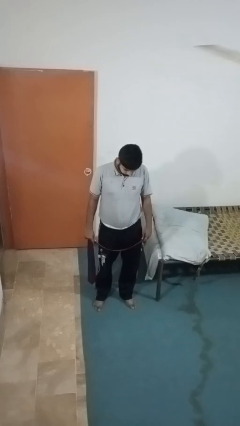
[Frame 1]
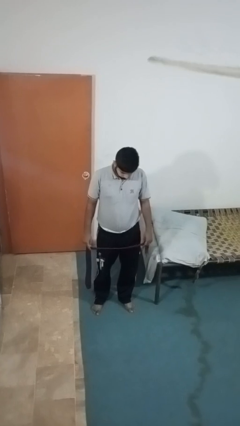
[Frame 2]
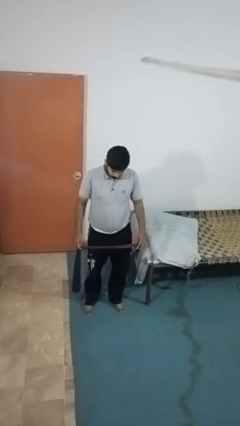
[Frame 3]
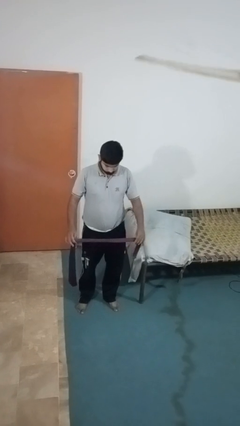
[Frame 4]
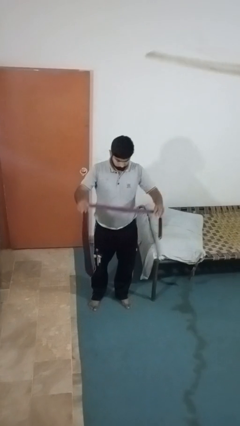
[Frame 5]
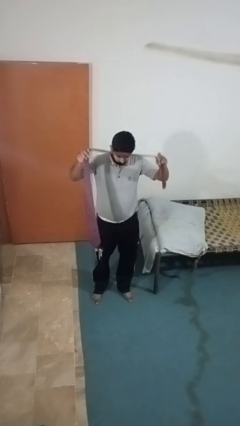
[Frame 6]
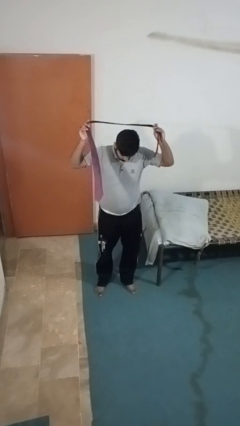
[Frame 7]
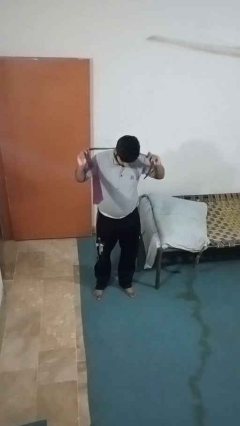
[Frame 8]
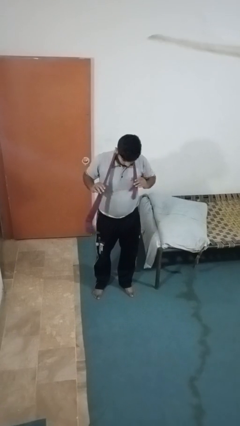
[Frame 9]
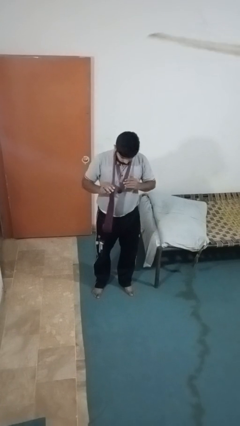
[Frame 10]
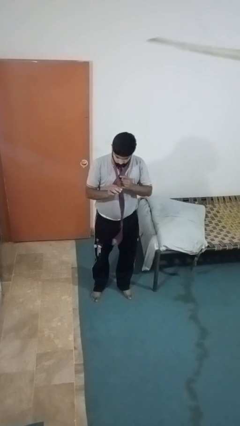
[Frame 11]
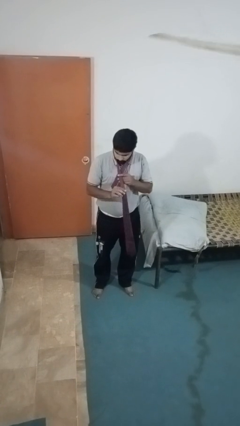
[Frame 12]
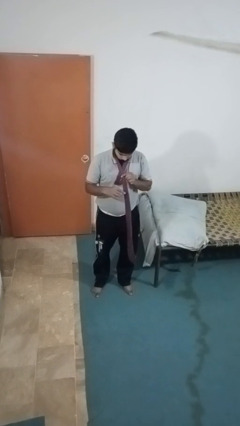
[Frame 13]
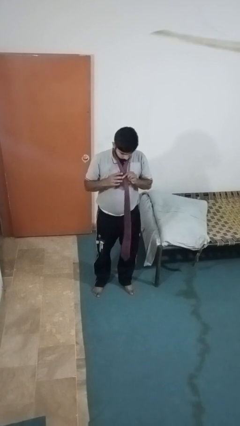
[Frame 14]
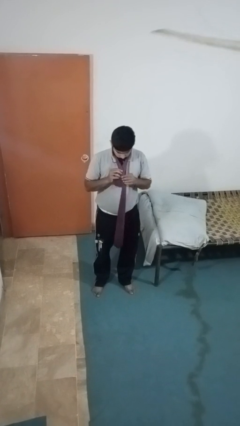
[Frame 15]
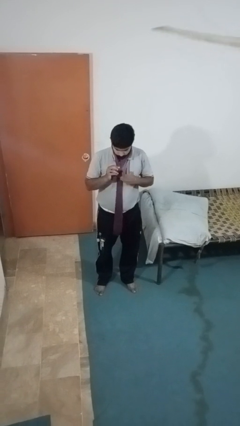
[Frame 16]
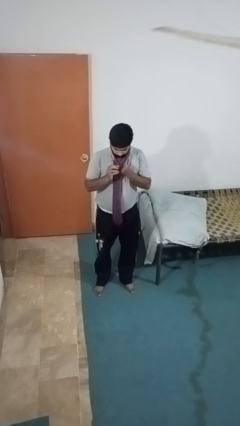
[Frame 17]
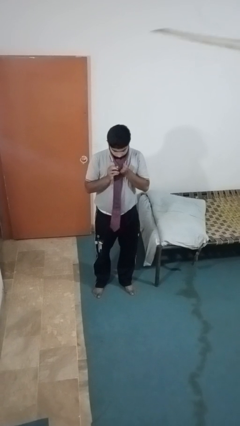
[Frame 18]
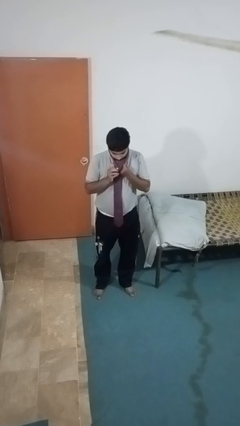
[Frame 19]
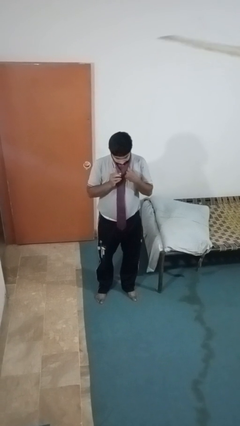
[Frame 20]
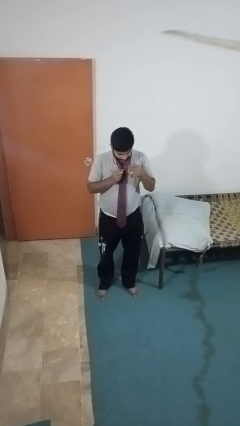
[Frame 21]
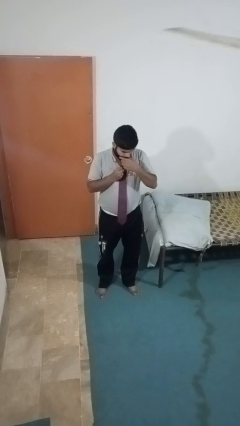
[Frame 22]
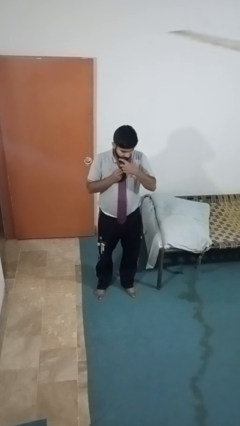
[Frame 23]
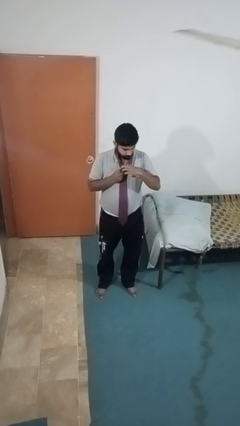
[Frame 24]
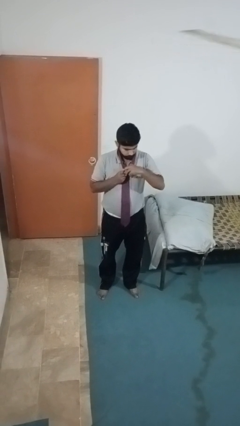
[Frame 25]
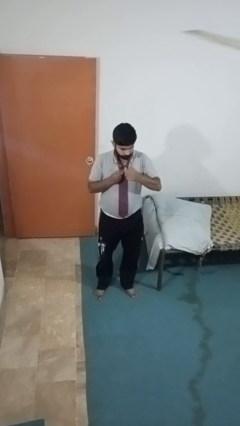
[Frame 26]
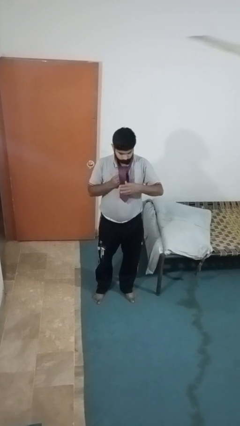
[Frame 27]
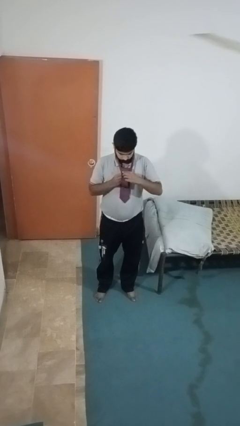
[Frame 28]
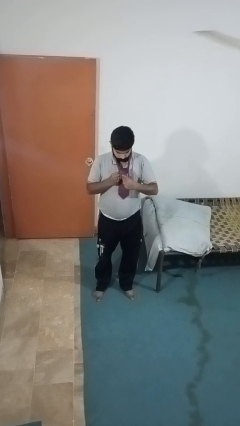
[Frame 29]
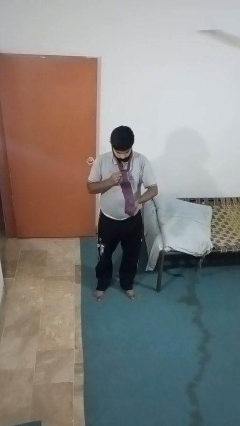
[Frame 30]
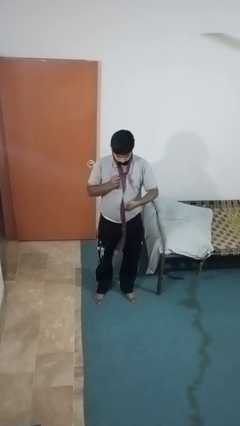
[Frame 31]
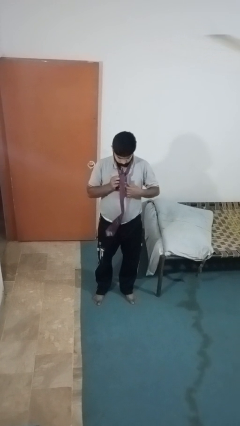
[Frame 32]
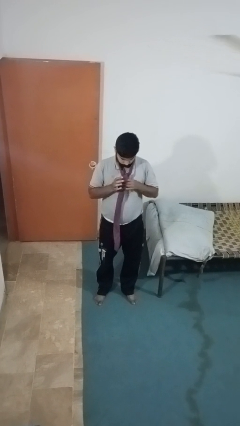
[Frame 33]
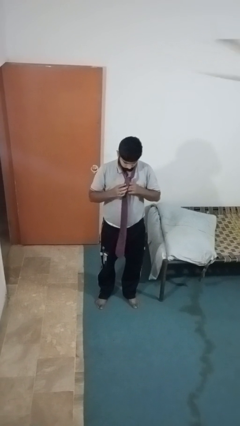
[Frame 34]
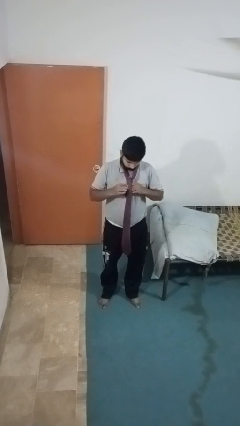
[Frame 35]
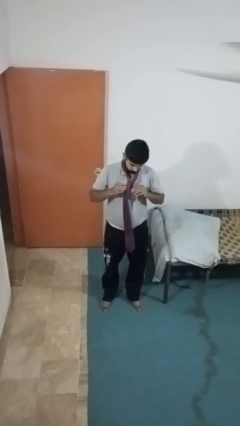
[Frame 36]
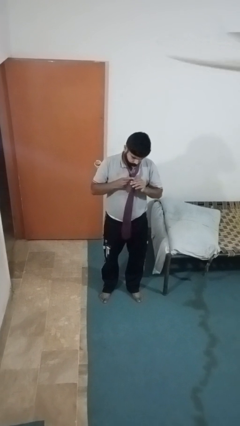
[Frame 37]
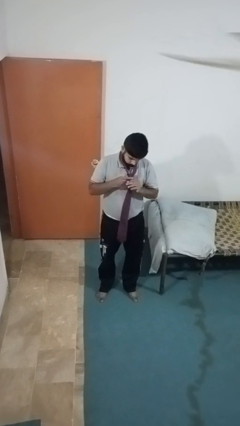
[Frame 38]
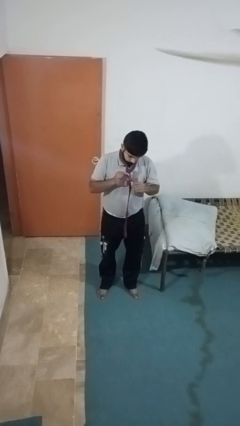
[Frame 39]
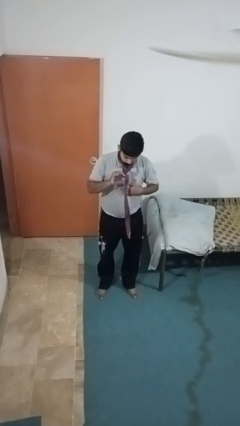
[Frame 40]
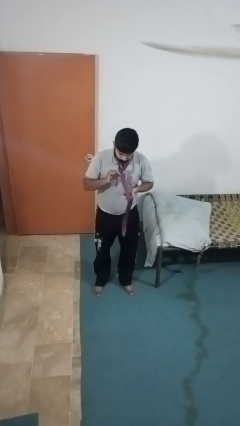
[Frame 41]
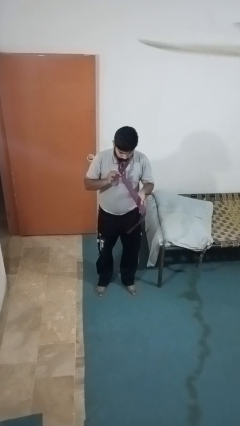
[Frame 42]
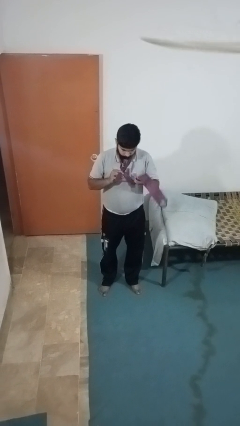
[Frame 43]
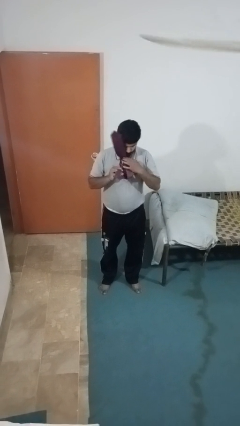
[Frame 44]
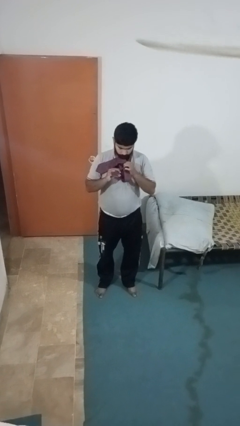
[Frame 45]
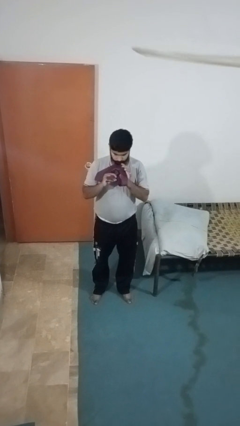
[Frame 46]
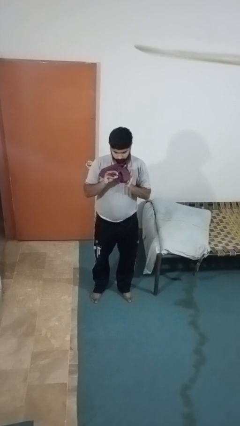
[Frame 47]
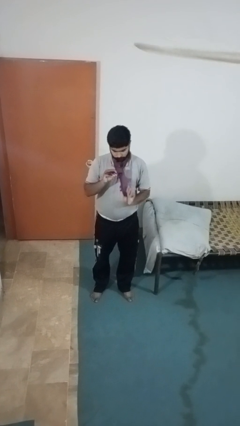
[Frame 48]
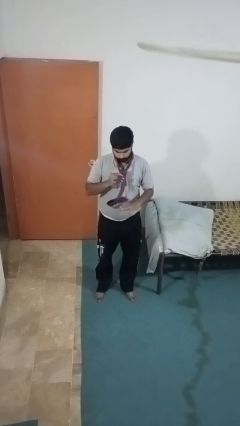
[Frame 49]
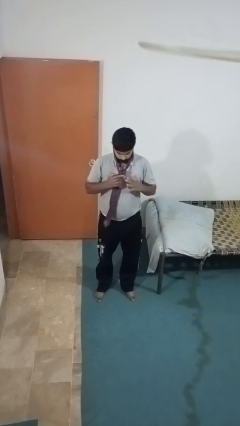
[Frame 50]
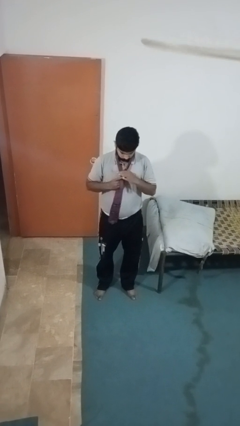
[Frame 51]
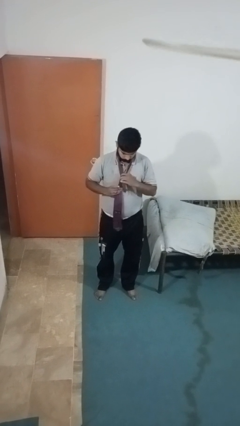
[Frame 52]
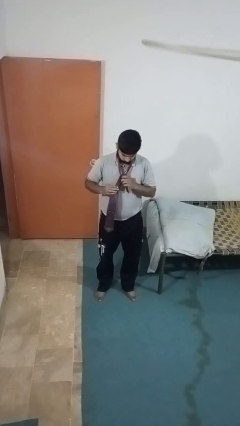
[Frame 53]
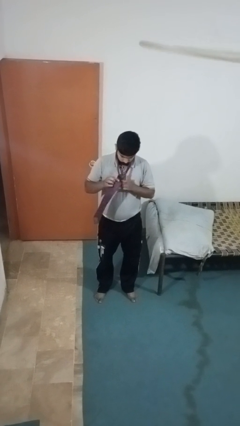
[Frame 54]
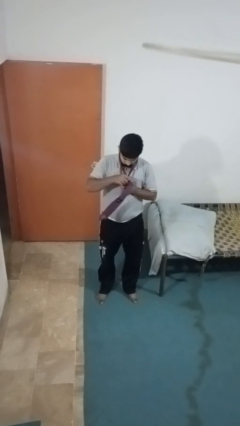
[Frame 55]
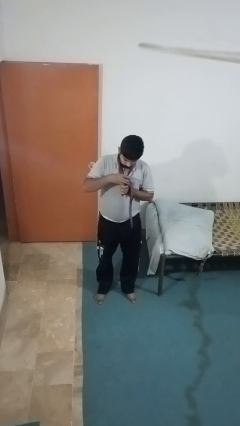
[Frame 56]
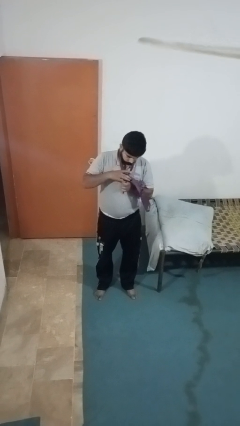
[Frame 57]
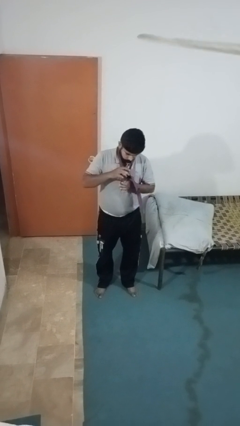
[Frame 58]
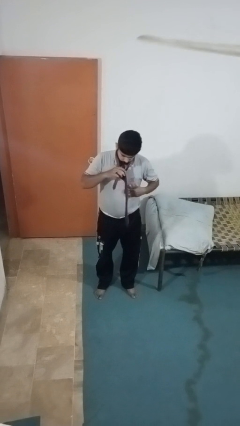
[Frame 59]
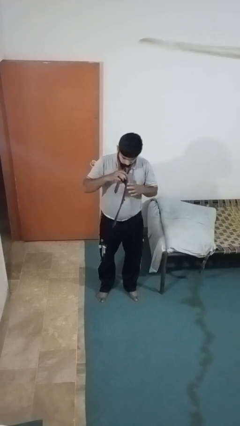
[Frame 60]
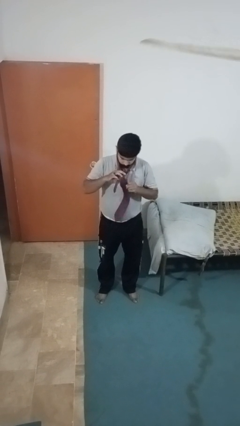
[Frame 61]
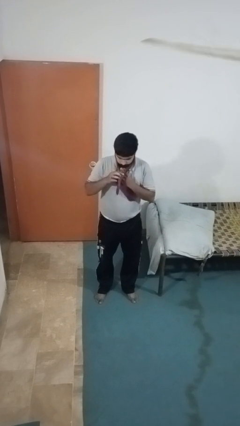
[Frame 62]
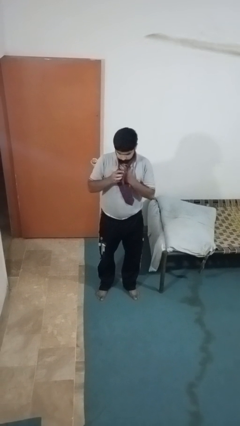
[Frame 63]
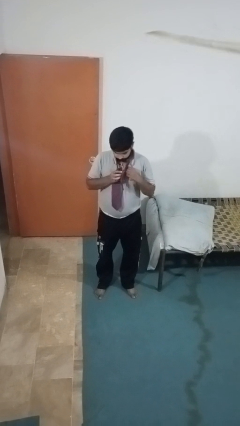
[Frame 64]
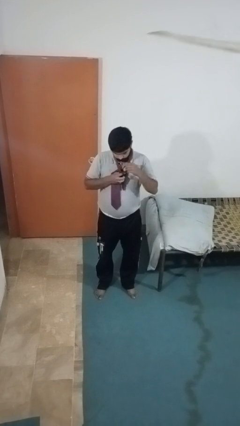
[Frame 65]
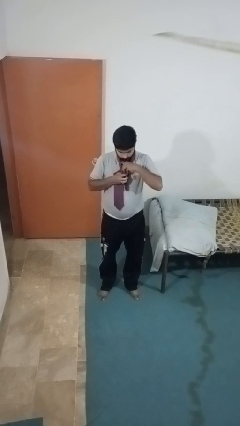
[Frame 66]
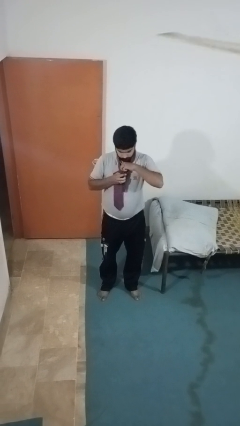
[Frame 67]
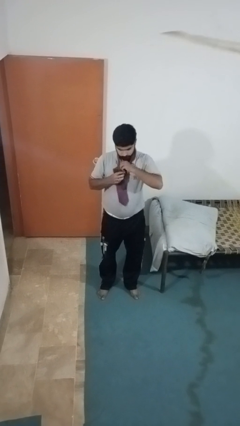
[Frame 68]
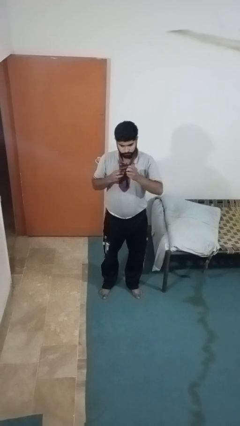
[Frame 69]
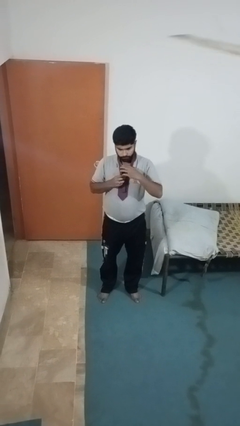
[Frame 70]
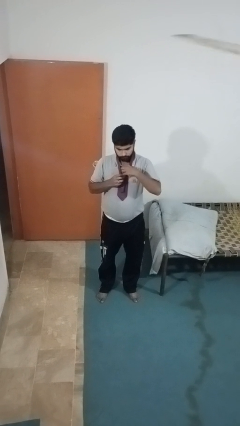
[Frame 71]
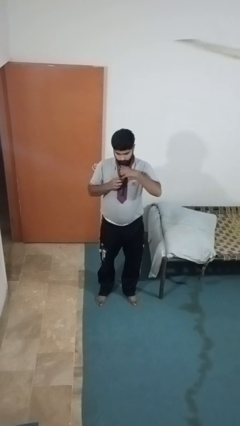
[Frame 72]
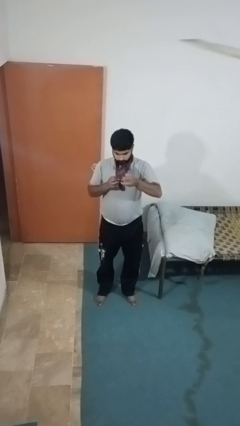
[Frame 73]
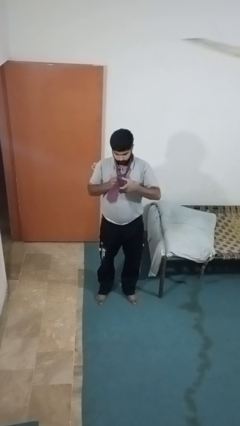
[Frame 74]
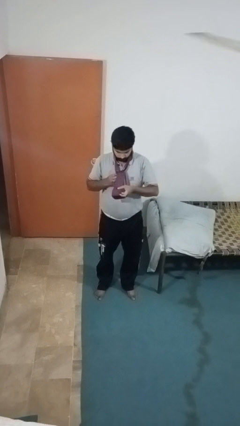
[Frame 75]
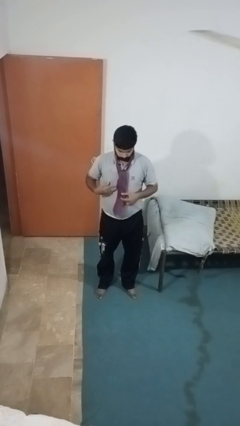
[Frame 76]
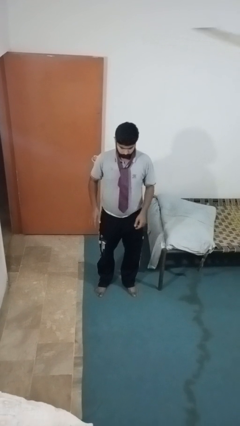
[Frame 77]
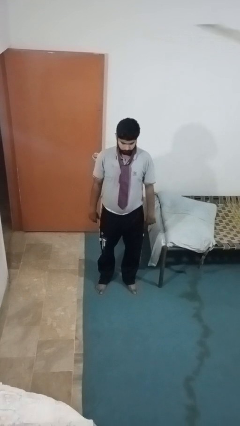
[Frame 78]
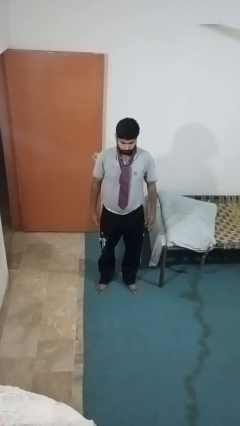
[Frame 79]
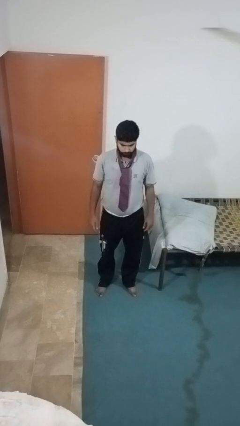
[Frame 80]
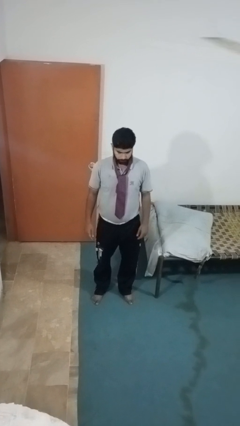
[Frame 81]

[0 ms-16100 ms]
person puts on necktie

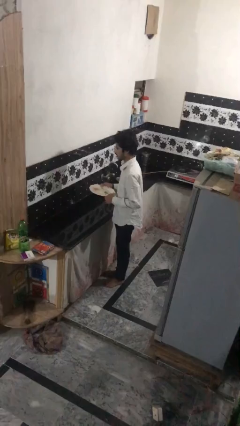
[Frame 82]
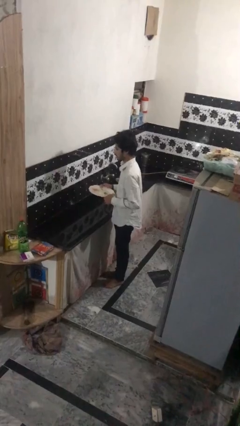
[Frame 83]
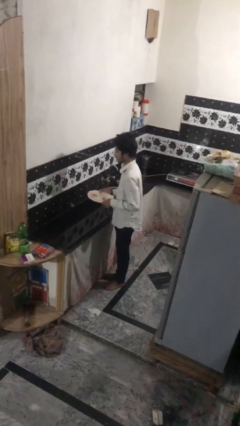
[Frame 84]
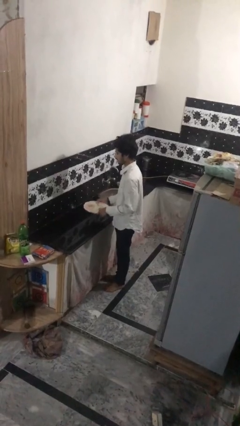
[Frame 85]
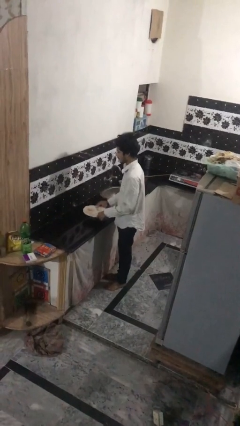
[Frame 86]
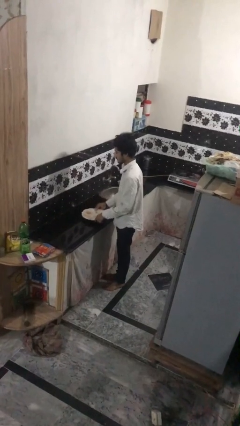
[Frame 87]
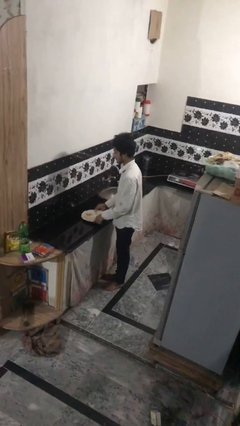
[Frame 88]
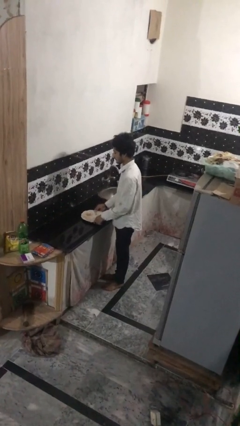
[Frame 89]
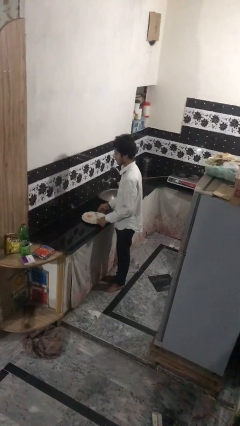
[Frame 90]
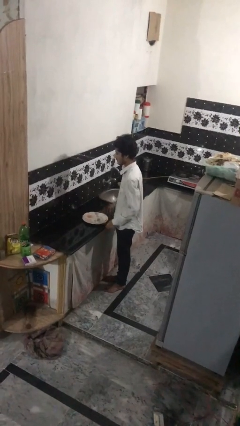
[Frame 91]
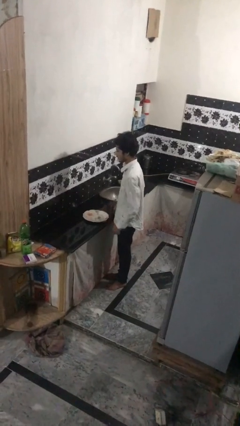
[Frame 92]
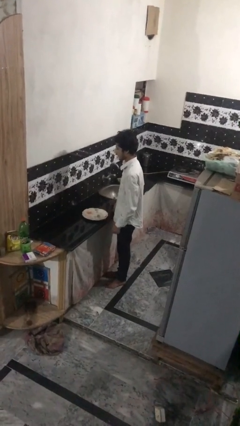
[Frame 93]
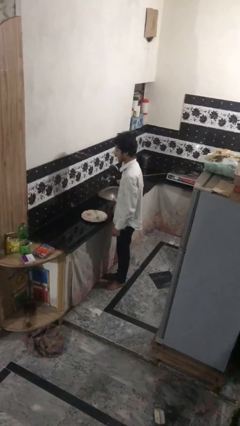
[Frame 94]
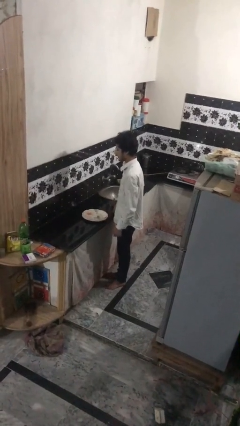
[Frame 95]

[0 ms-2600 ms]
person puts down object on countertop
